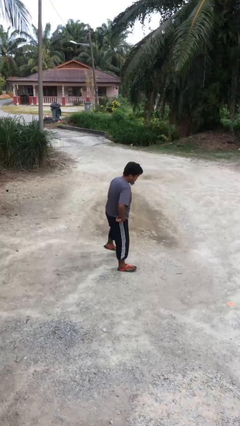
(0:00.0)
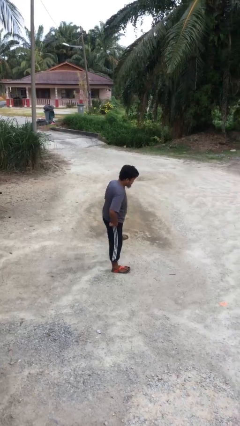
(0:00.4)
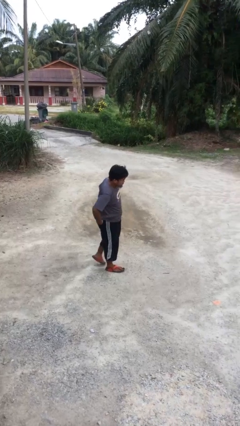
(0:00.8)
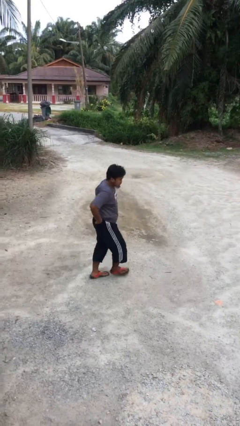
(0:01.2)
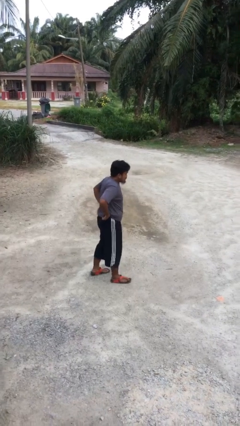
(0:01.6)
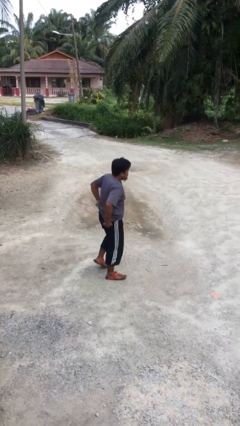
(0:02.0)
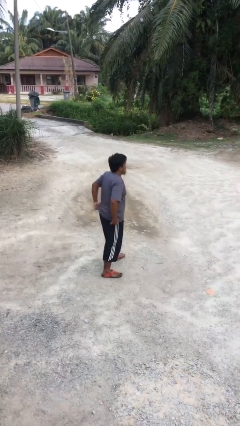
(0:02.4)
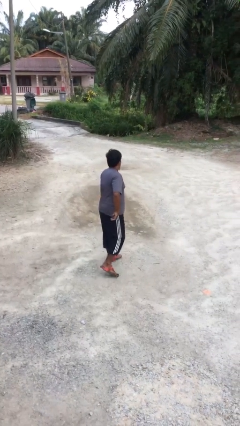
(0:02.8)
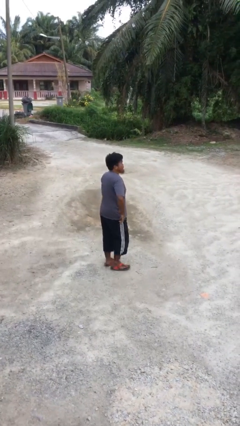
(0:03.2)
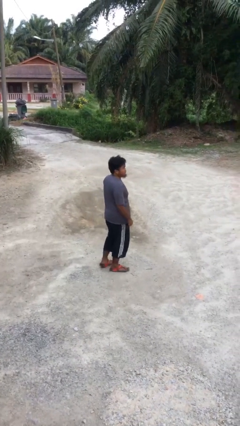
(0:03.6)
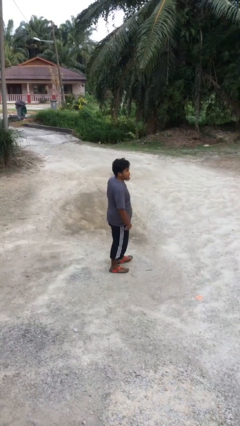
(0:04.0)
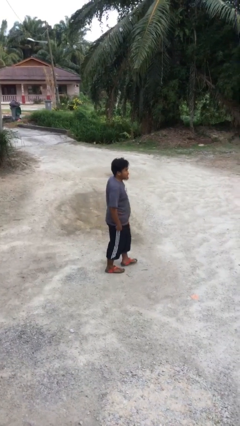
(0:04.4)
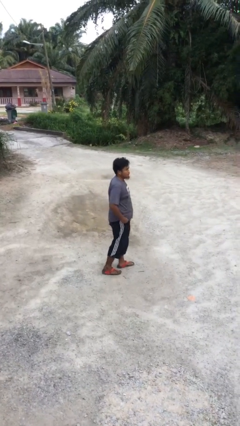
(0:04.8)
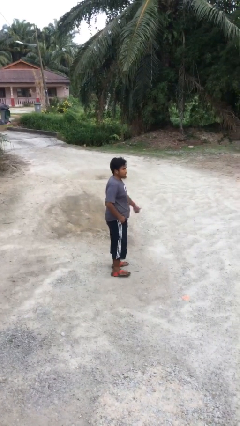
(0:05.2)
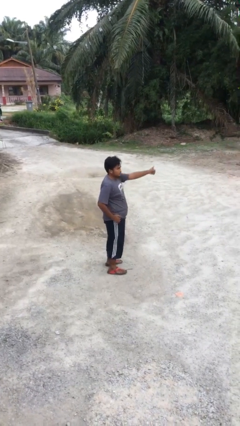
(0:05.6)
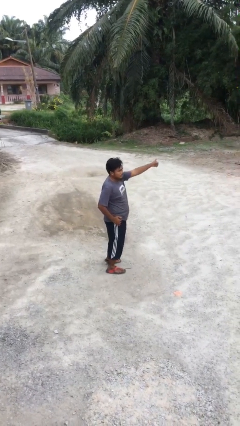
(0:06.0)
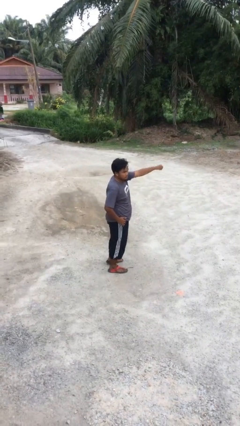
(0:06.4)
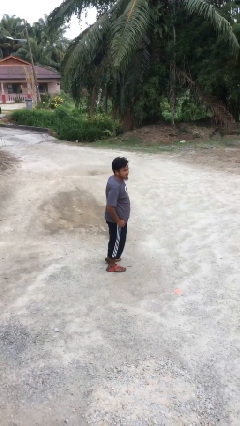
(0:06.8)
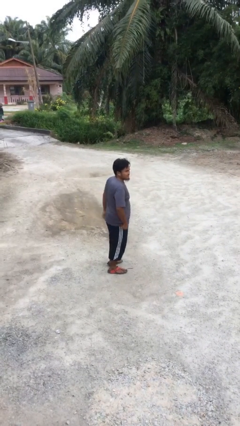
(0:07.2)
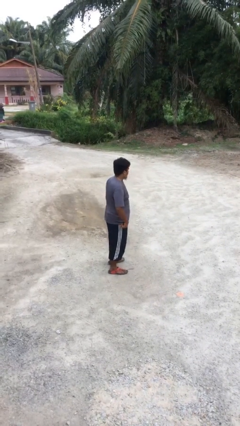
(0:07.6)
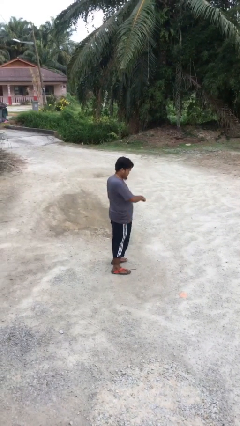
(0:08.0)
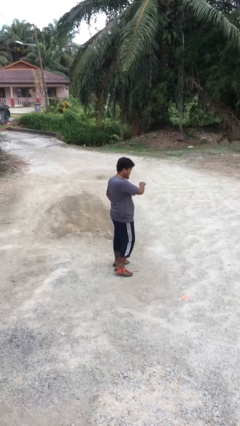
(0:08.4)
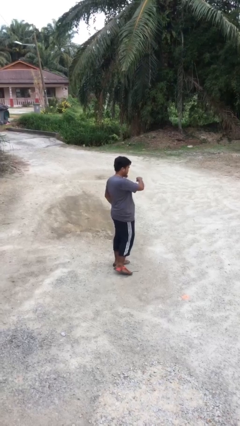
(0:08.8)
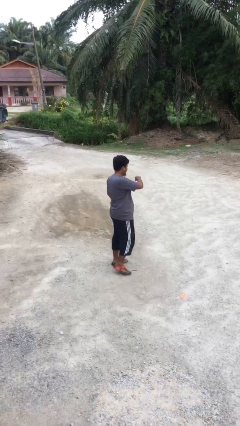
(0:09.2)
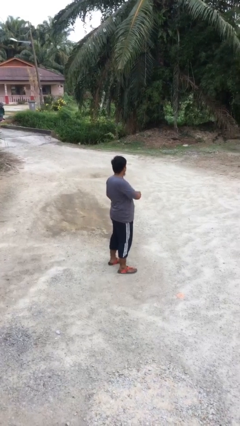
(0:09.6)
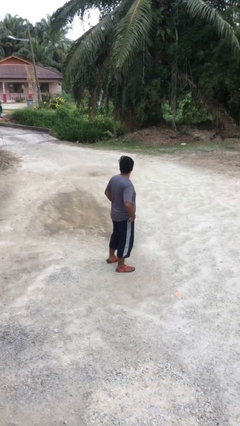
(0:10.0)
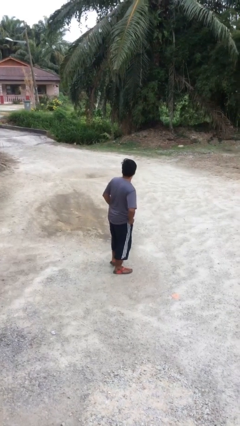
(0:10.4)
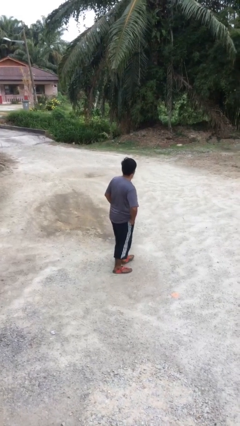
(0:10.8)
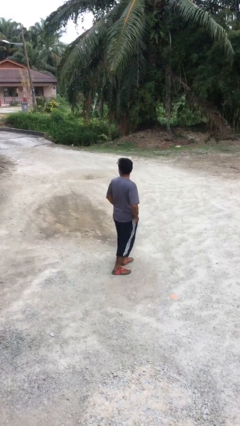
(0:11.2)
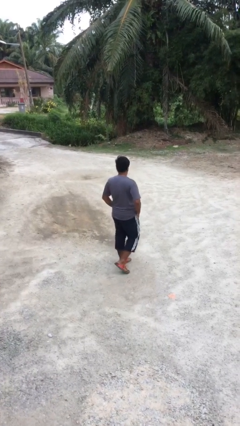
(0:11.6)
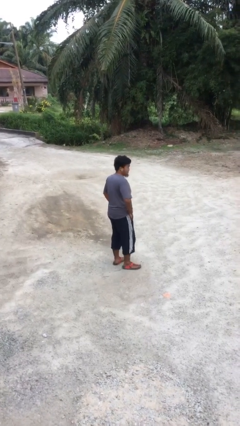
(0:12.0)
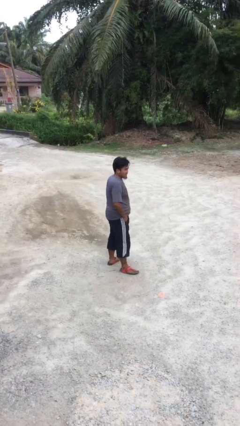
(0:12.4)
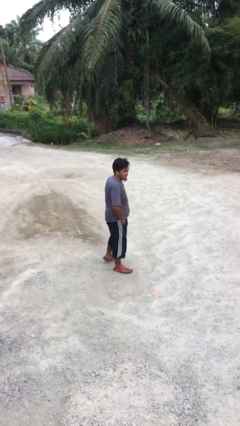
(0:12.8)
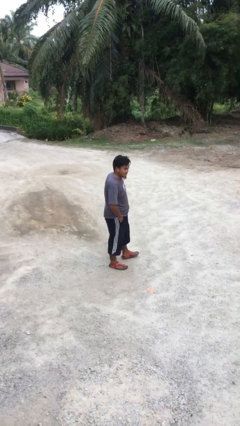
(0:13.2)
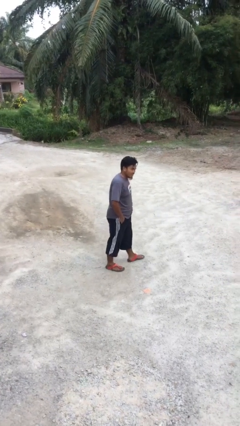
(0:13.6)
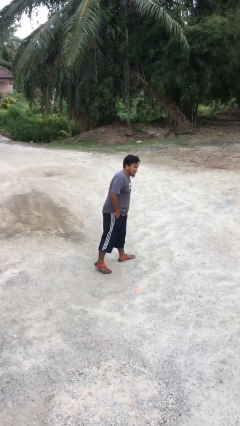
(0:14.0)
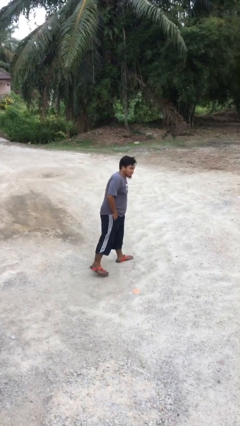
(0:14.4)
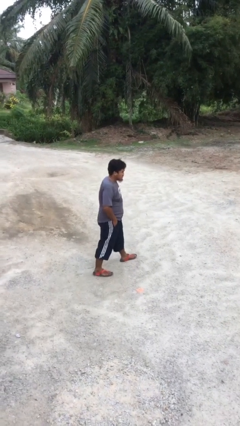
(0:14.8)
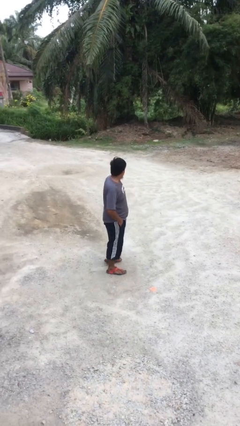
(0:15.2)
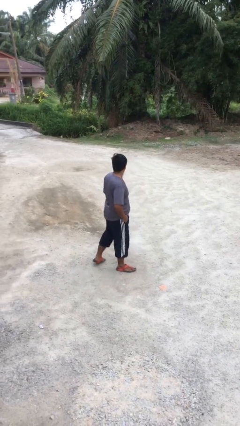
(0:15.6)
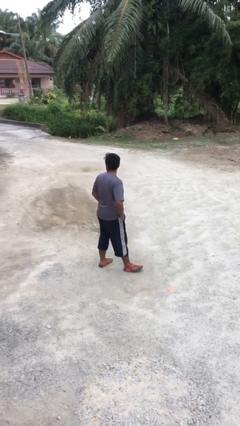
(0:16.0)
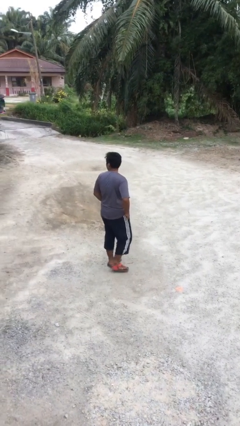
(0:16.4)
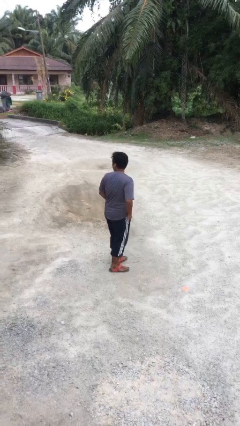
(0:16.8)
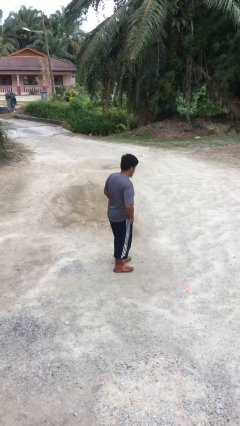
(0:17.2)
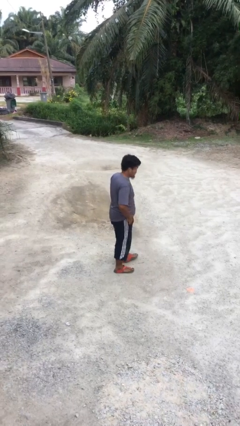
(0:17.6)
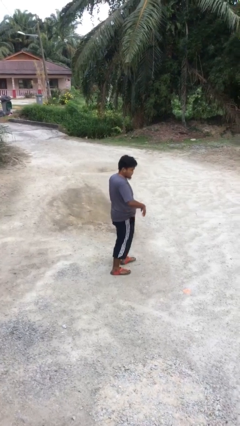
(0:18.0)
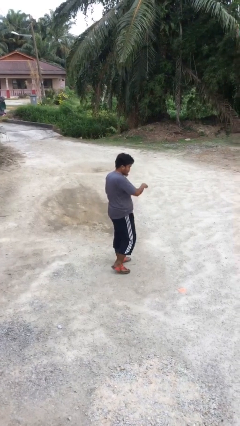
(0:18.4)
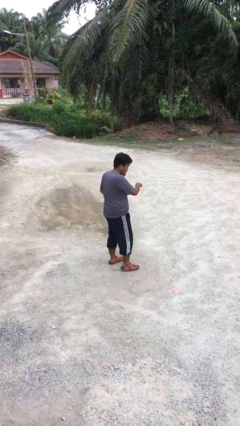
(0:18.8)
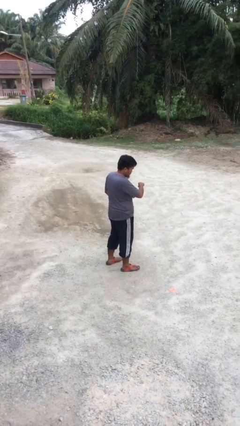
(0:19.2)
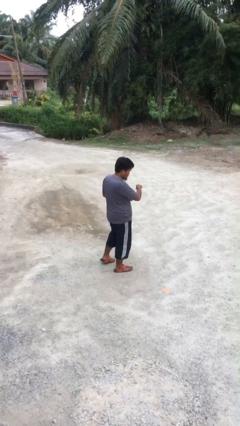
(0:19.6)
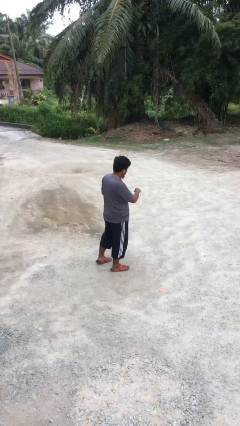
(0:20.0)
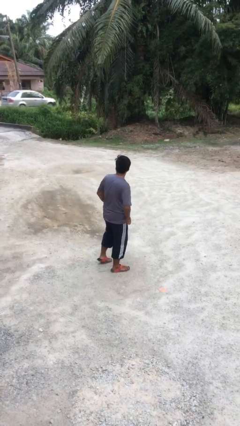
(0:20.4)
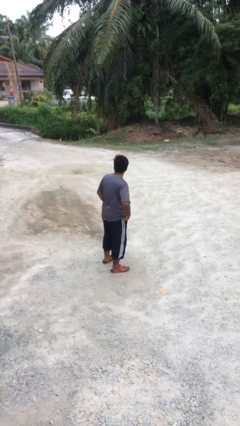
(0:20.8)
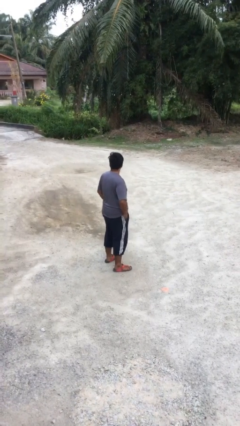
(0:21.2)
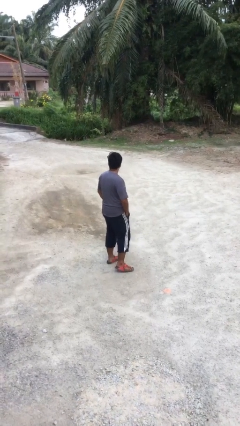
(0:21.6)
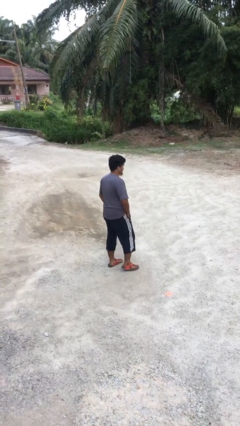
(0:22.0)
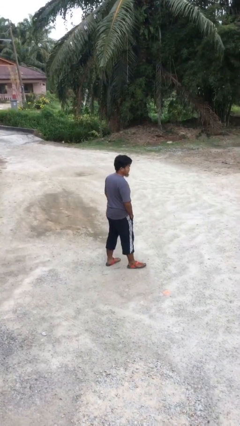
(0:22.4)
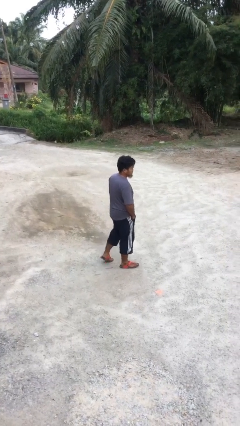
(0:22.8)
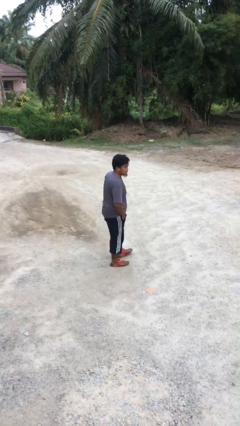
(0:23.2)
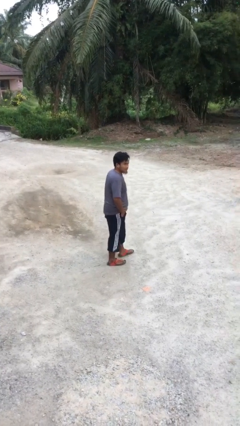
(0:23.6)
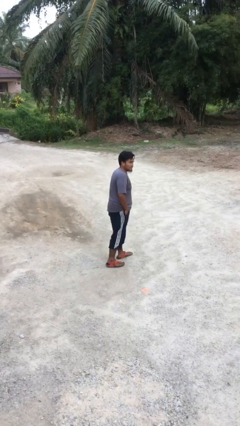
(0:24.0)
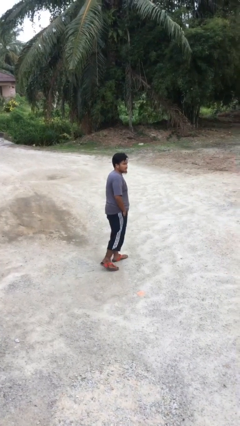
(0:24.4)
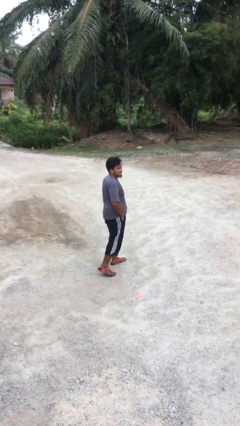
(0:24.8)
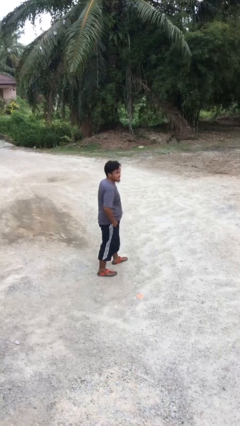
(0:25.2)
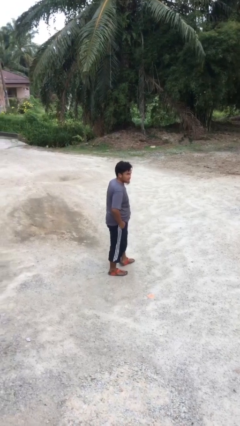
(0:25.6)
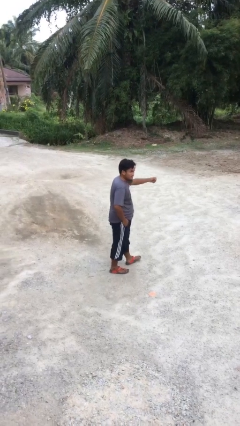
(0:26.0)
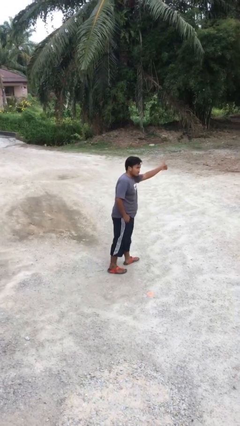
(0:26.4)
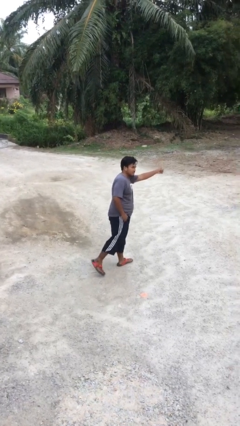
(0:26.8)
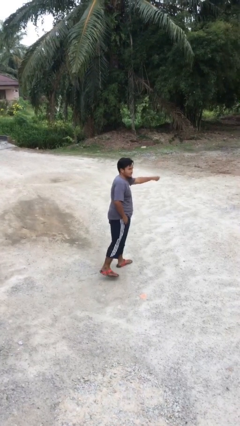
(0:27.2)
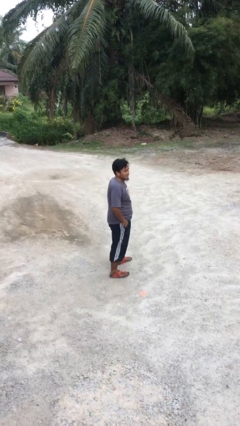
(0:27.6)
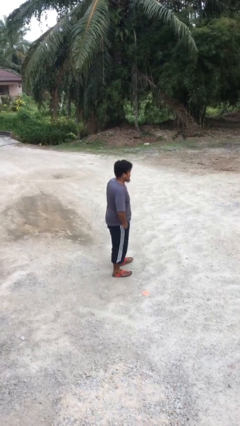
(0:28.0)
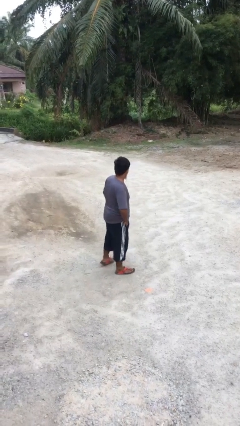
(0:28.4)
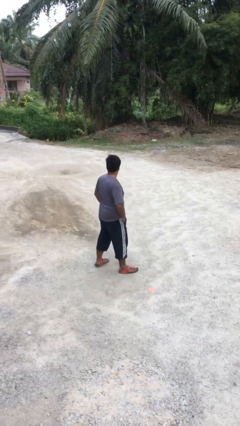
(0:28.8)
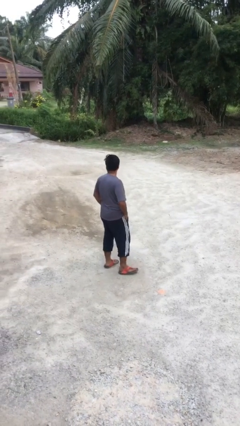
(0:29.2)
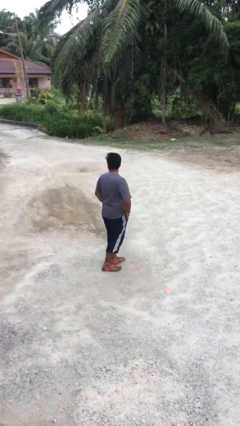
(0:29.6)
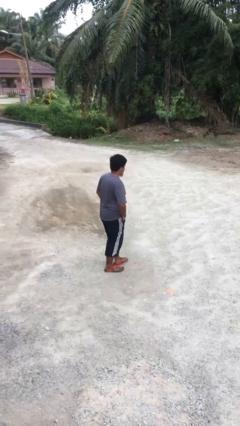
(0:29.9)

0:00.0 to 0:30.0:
person walks

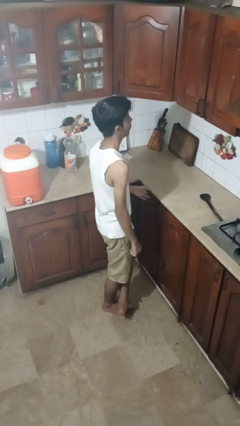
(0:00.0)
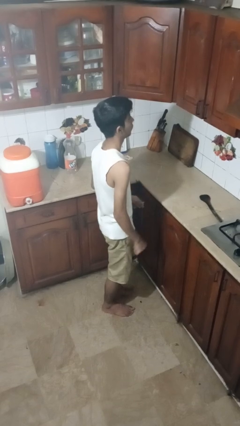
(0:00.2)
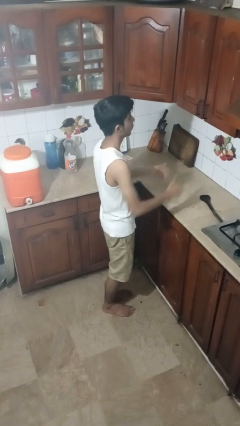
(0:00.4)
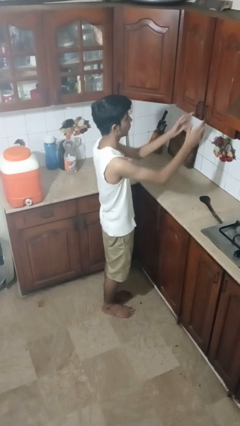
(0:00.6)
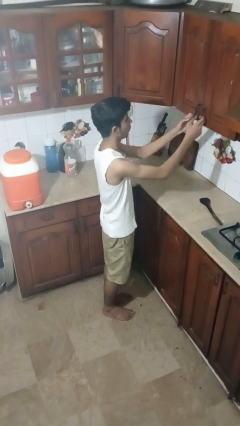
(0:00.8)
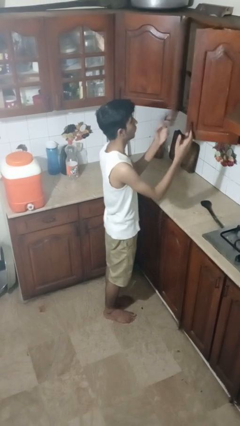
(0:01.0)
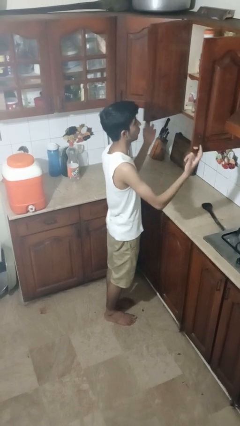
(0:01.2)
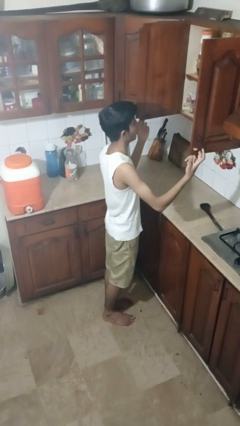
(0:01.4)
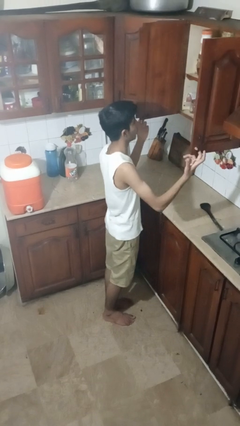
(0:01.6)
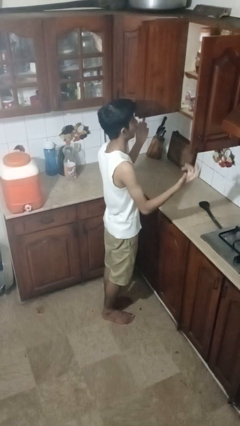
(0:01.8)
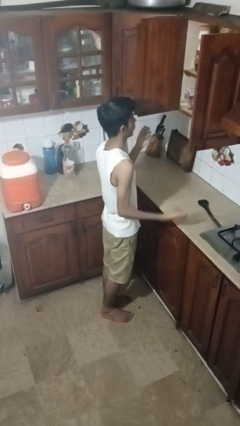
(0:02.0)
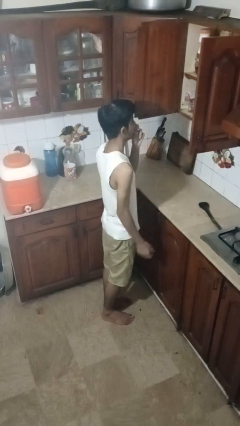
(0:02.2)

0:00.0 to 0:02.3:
person opens cabinet

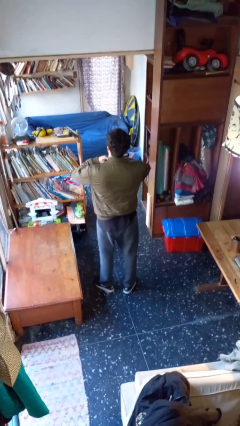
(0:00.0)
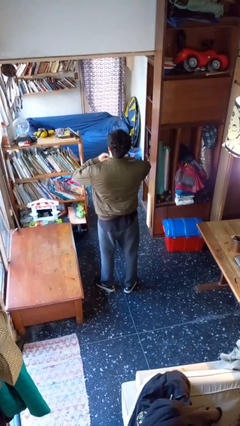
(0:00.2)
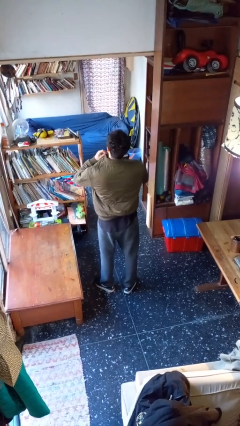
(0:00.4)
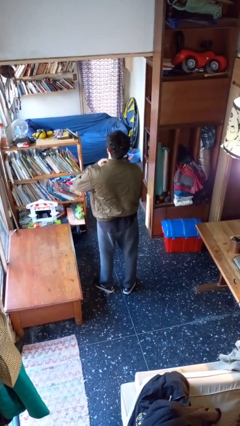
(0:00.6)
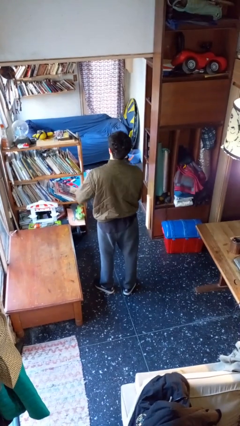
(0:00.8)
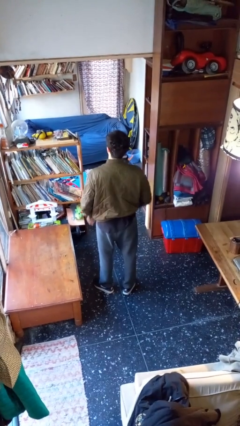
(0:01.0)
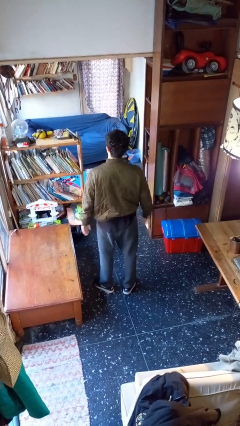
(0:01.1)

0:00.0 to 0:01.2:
person unzips jacket
